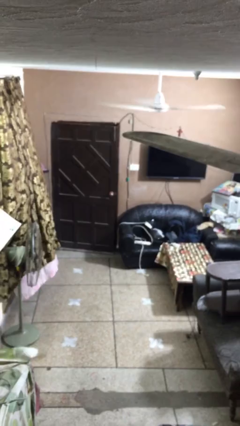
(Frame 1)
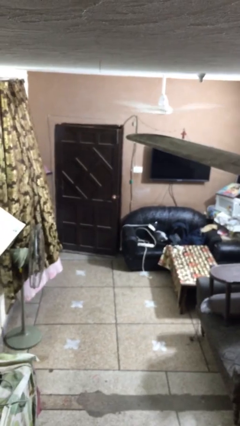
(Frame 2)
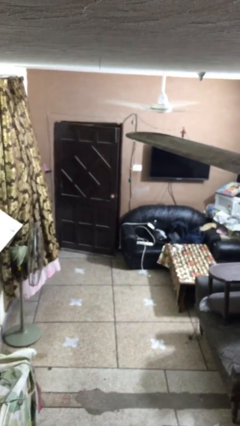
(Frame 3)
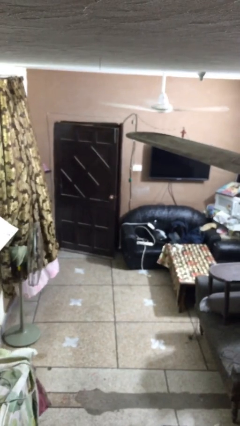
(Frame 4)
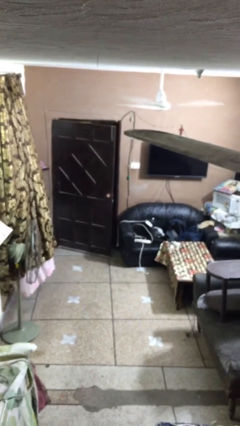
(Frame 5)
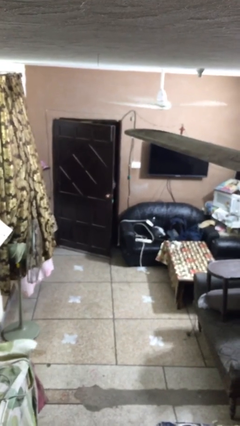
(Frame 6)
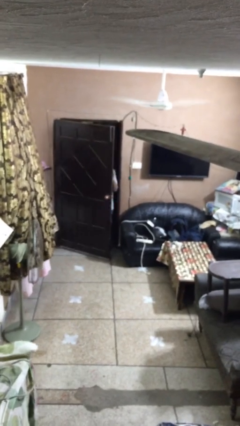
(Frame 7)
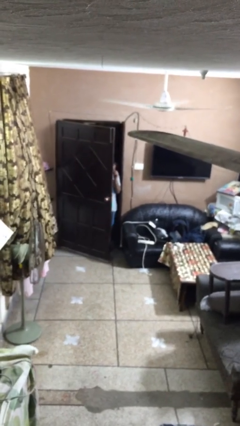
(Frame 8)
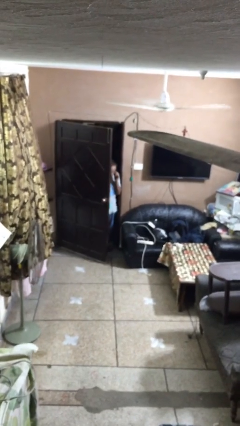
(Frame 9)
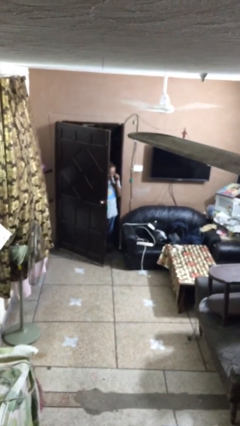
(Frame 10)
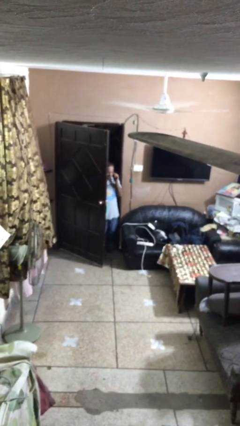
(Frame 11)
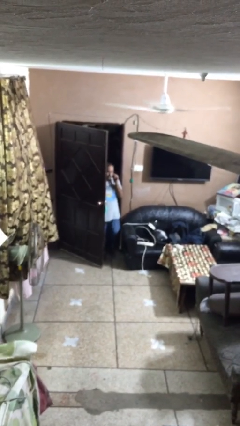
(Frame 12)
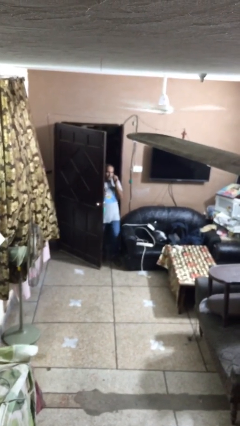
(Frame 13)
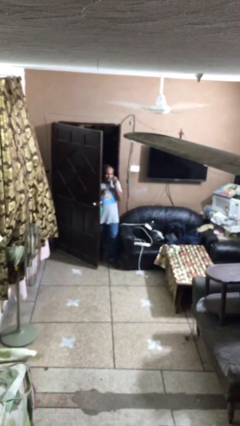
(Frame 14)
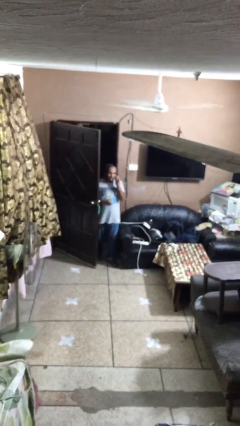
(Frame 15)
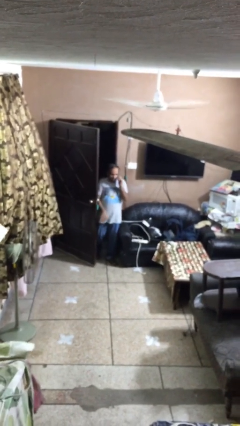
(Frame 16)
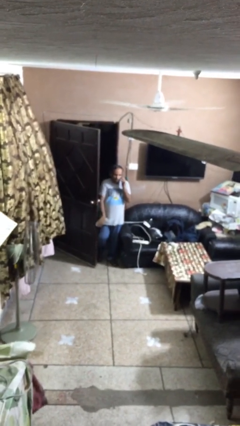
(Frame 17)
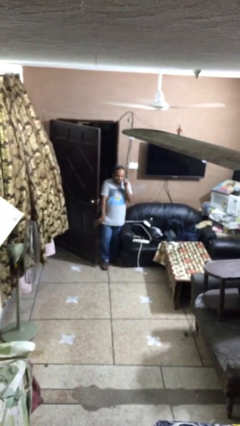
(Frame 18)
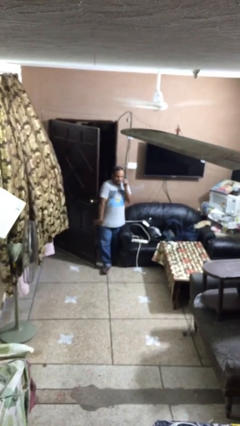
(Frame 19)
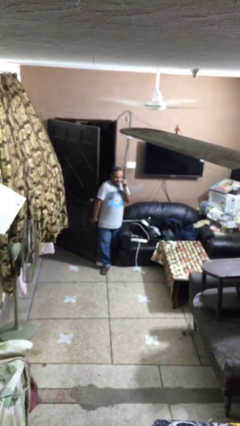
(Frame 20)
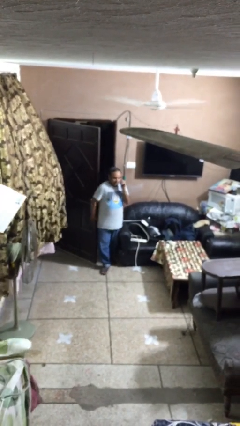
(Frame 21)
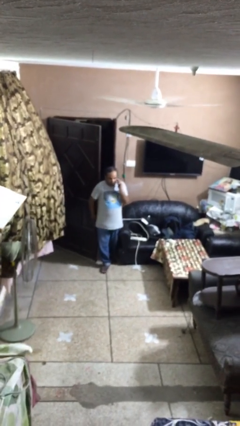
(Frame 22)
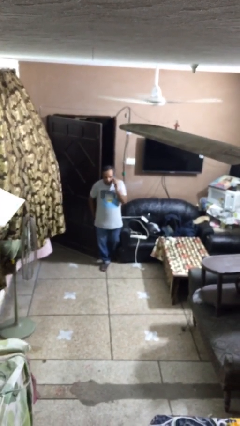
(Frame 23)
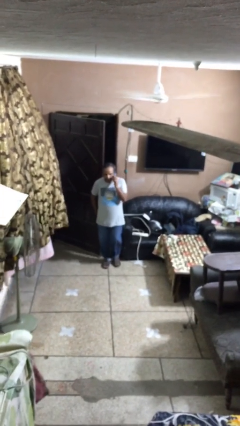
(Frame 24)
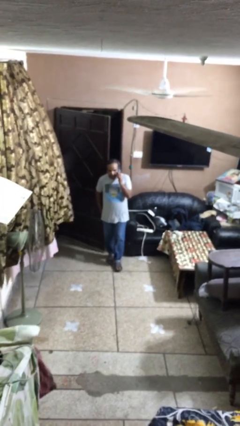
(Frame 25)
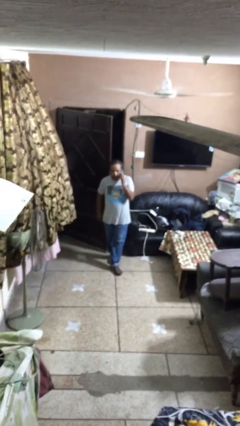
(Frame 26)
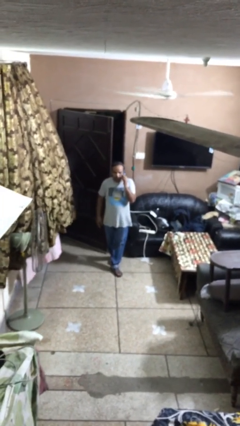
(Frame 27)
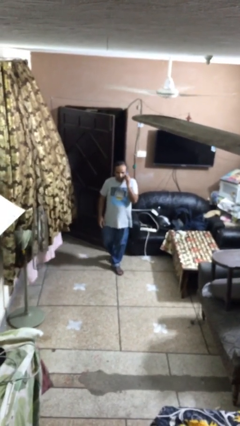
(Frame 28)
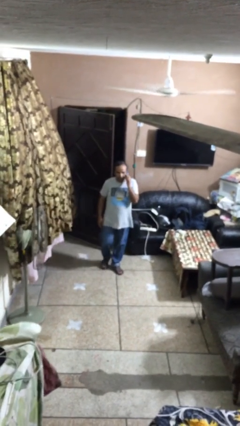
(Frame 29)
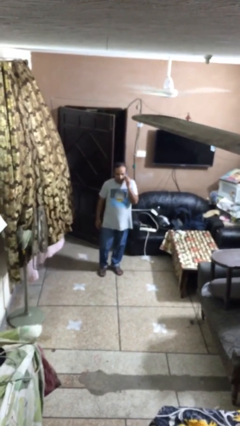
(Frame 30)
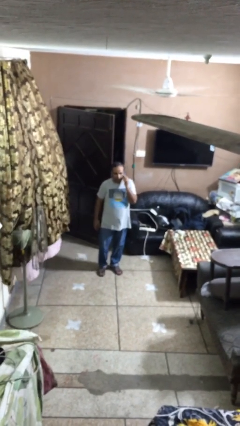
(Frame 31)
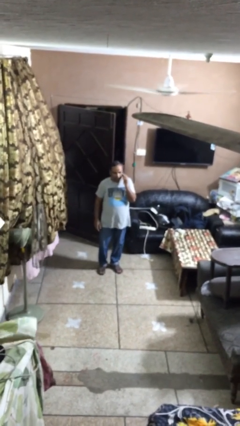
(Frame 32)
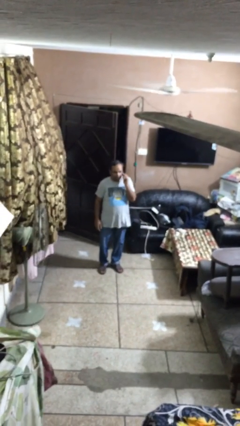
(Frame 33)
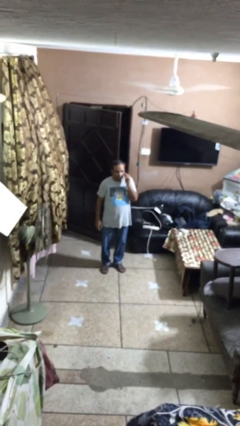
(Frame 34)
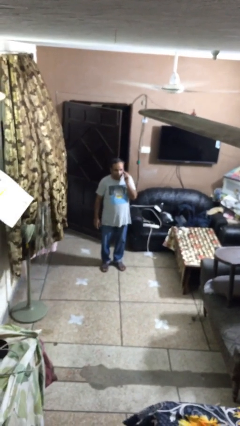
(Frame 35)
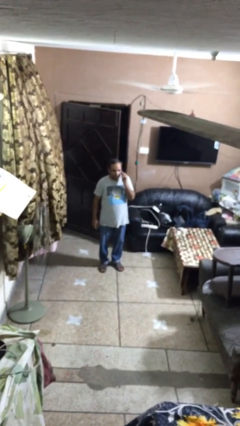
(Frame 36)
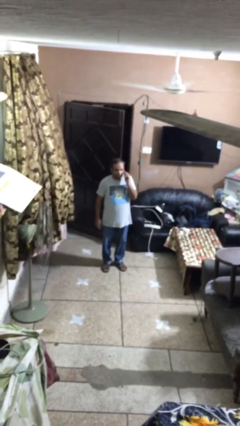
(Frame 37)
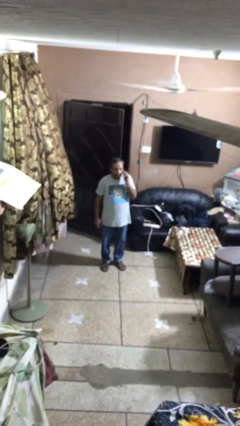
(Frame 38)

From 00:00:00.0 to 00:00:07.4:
person enters scene through structure

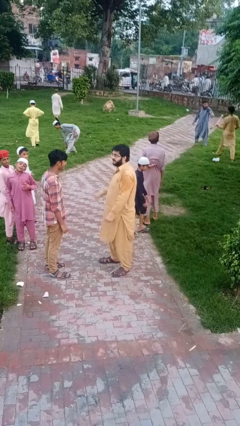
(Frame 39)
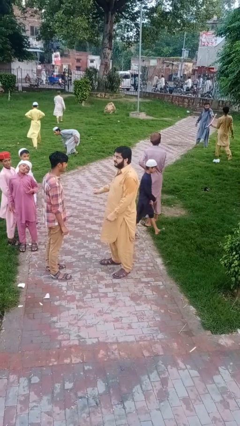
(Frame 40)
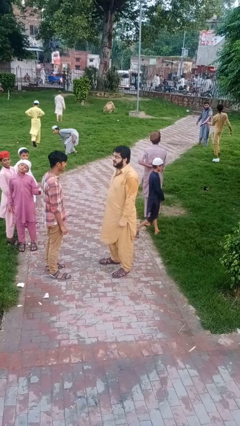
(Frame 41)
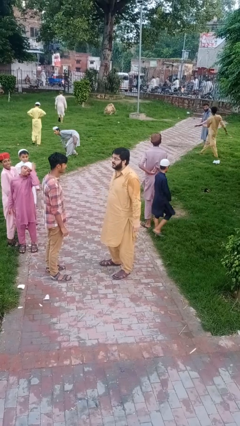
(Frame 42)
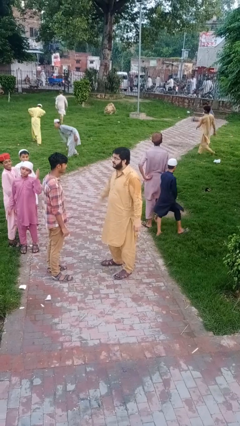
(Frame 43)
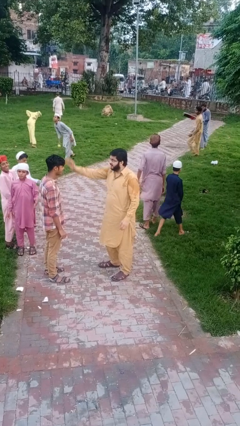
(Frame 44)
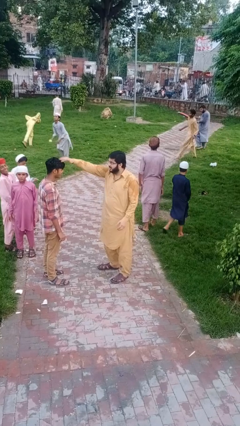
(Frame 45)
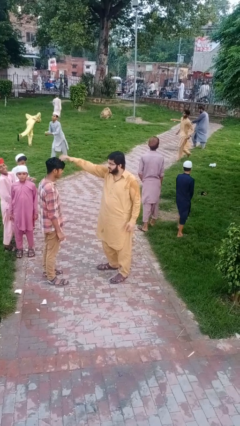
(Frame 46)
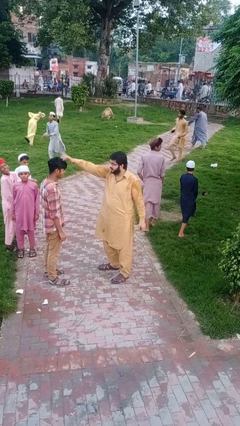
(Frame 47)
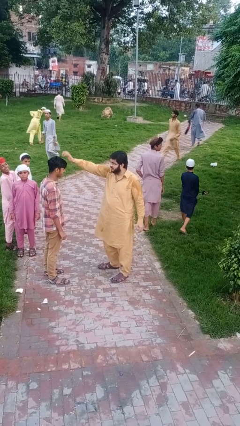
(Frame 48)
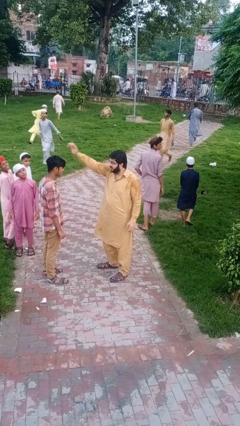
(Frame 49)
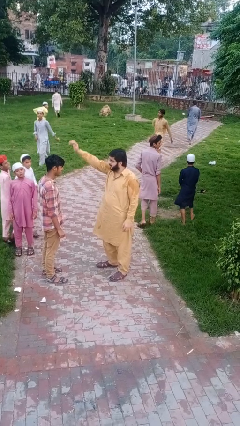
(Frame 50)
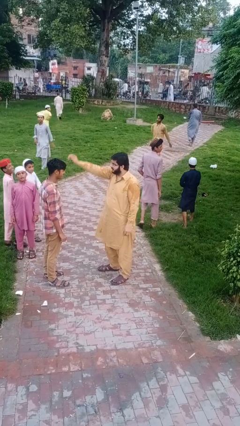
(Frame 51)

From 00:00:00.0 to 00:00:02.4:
person grabs person by hair

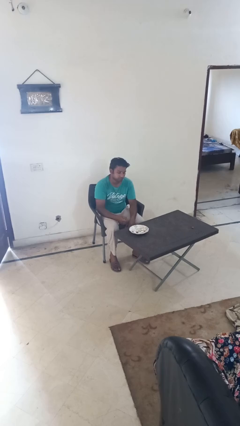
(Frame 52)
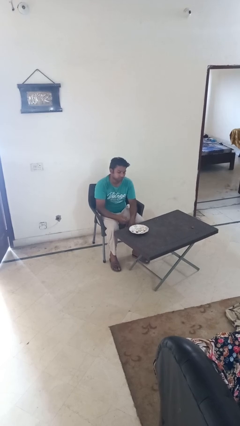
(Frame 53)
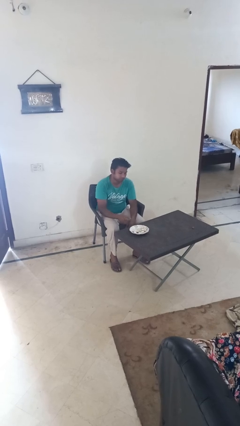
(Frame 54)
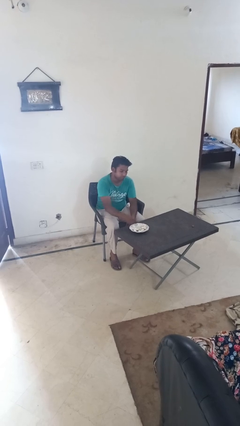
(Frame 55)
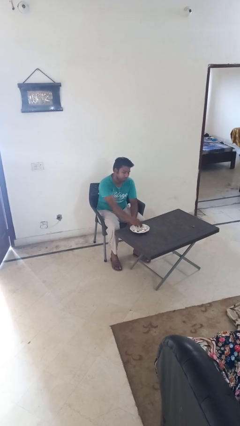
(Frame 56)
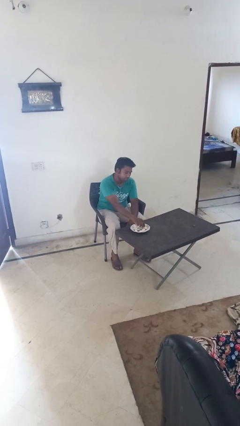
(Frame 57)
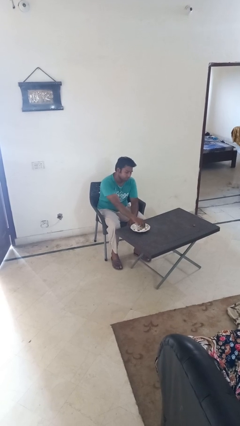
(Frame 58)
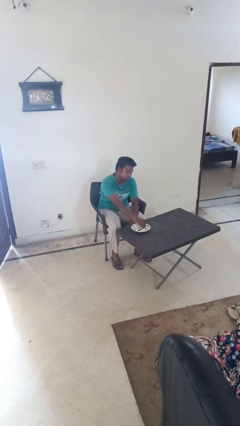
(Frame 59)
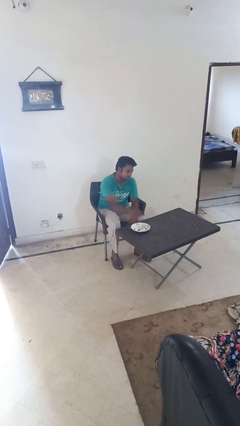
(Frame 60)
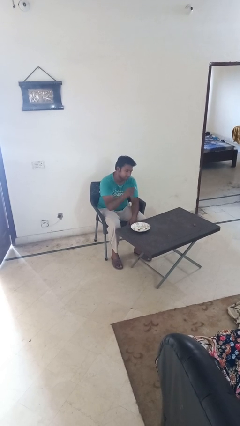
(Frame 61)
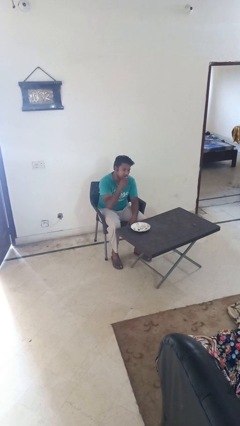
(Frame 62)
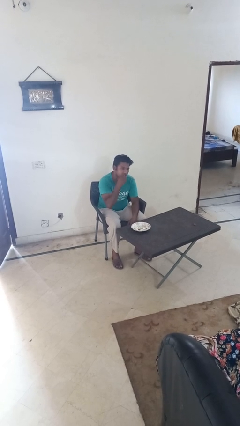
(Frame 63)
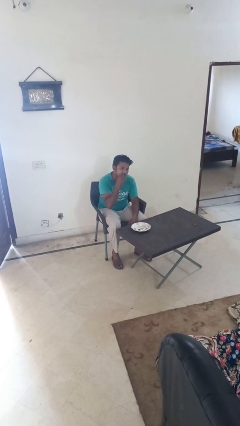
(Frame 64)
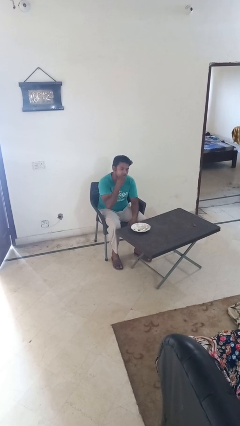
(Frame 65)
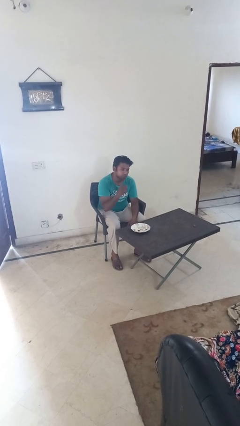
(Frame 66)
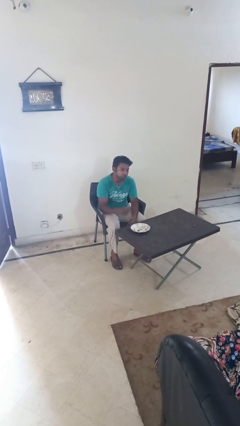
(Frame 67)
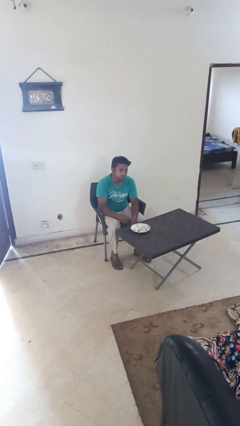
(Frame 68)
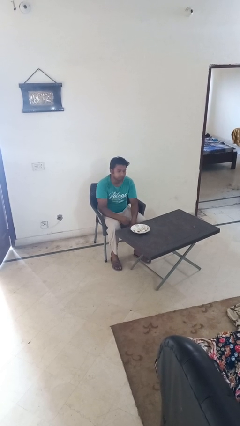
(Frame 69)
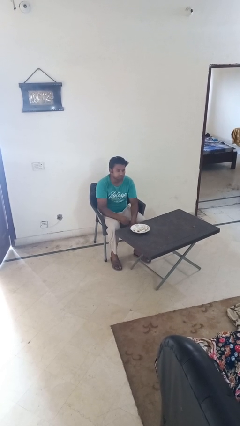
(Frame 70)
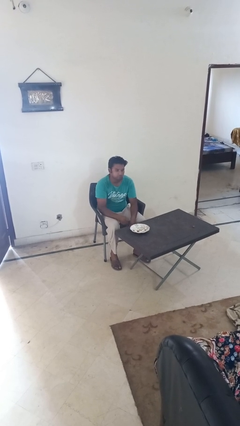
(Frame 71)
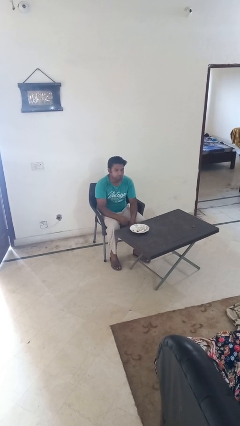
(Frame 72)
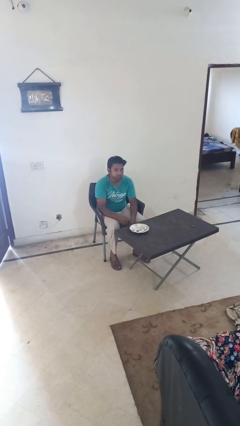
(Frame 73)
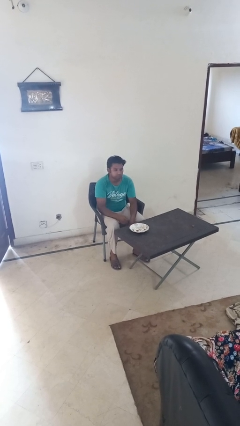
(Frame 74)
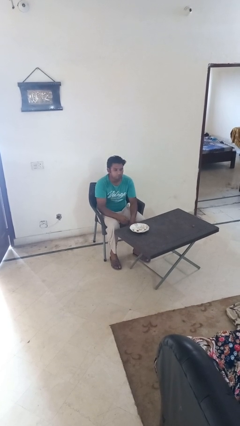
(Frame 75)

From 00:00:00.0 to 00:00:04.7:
person eats with hands

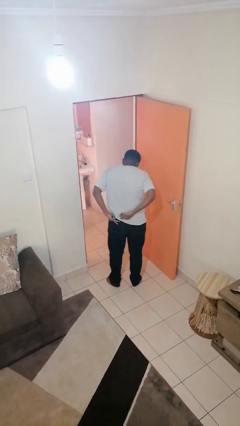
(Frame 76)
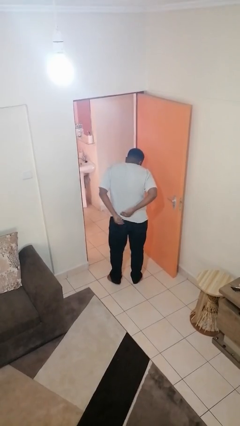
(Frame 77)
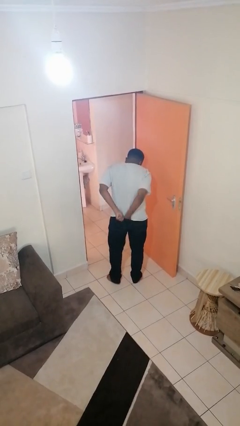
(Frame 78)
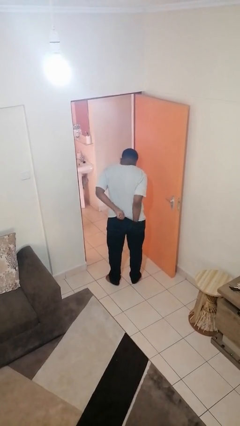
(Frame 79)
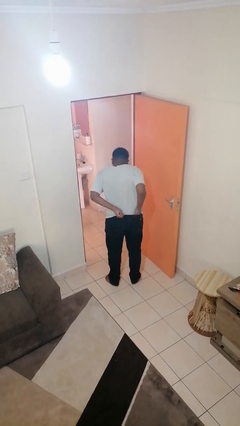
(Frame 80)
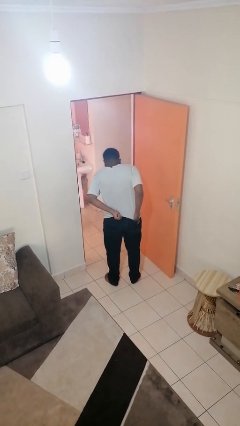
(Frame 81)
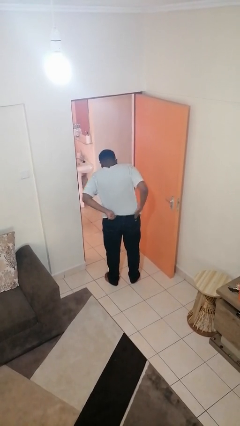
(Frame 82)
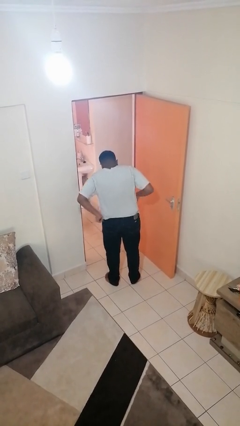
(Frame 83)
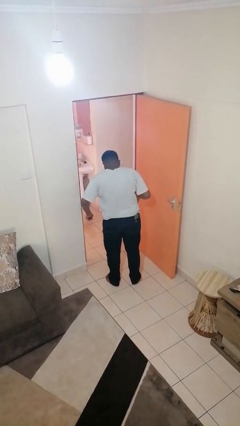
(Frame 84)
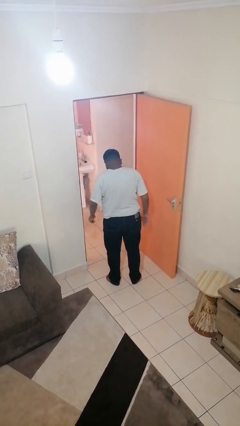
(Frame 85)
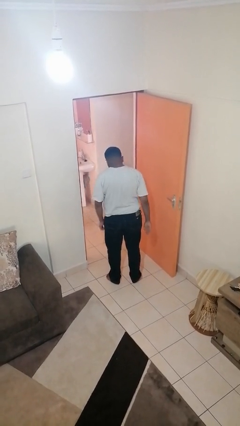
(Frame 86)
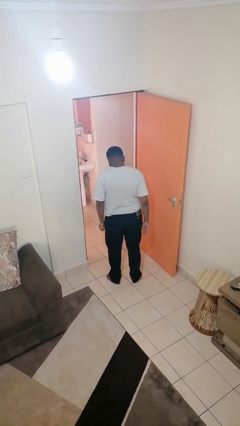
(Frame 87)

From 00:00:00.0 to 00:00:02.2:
person tucks in shirt

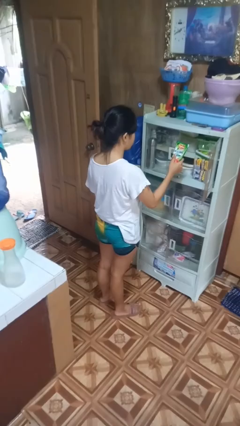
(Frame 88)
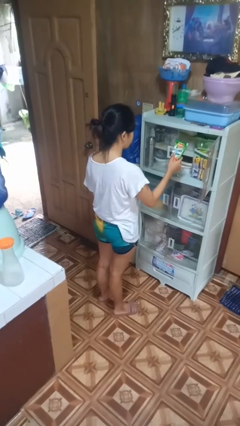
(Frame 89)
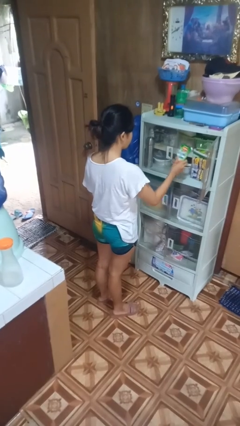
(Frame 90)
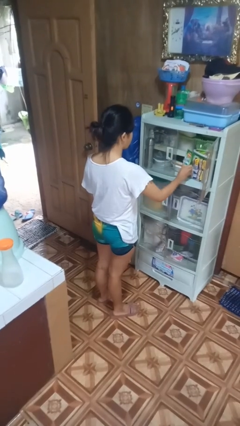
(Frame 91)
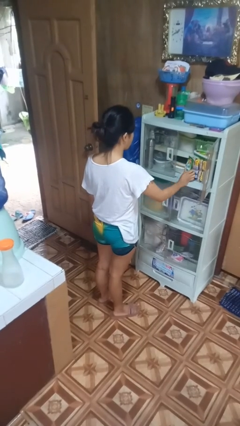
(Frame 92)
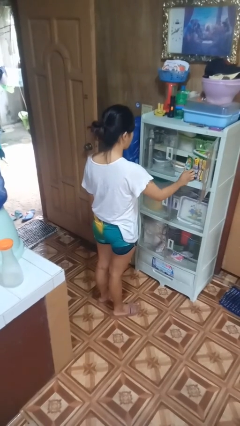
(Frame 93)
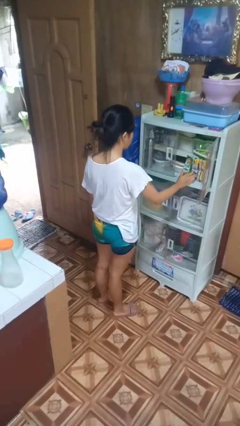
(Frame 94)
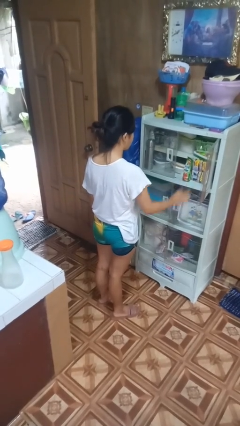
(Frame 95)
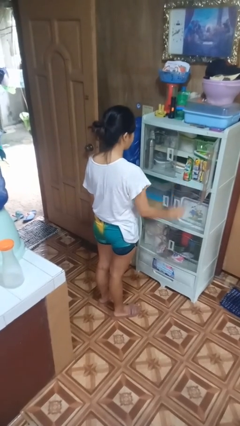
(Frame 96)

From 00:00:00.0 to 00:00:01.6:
person puts down object into cabinet
